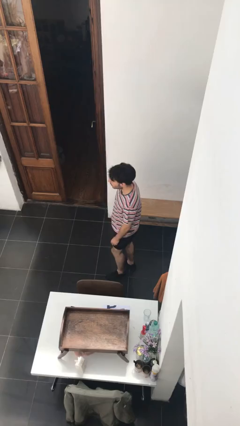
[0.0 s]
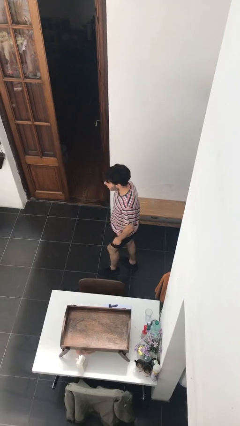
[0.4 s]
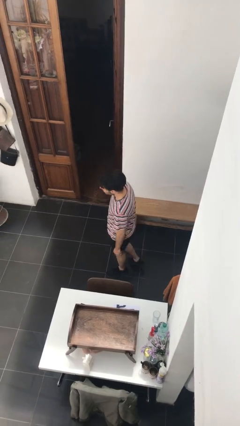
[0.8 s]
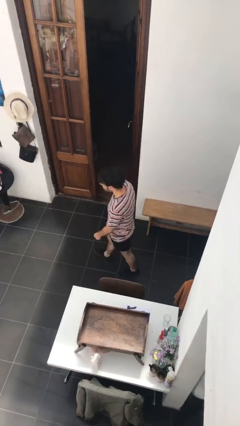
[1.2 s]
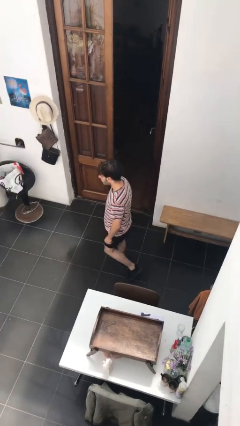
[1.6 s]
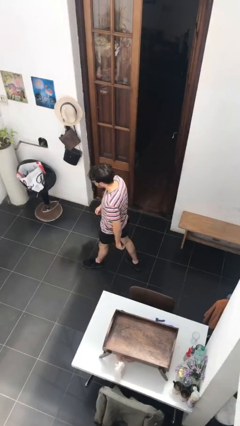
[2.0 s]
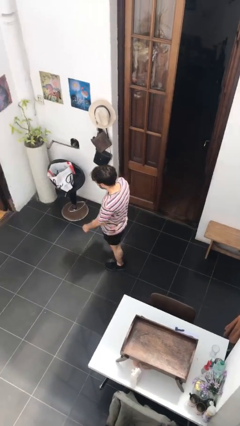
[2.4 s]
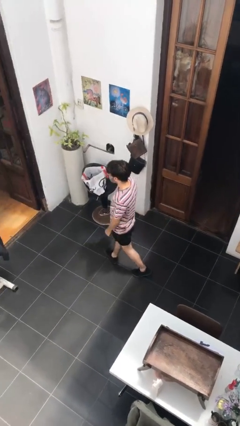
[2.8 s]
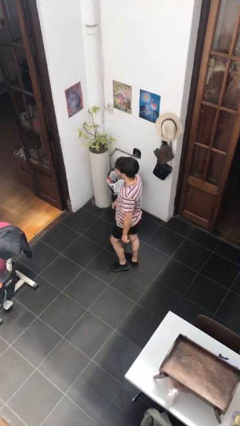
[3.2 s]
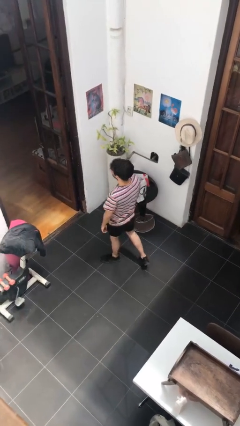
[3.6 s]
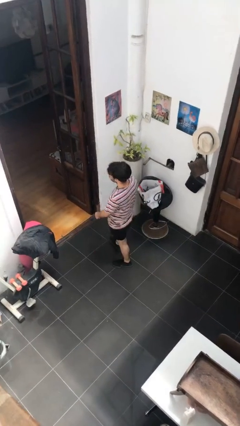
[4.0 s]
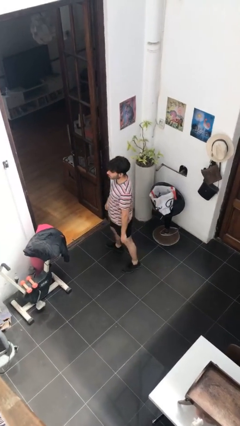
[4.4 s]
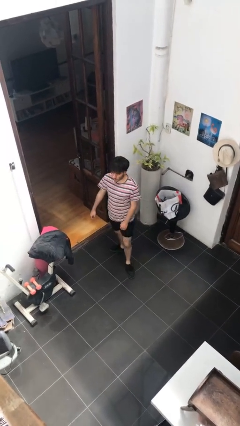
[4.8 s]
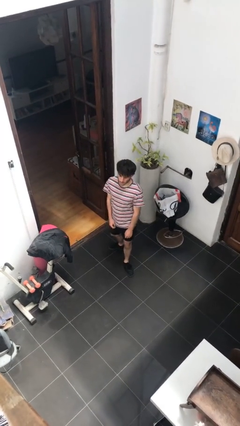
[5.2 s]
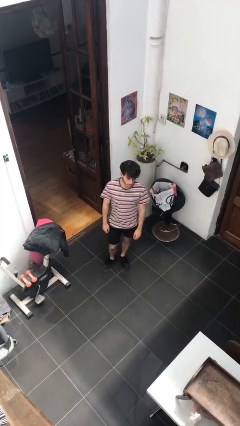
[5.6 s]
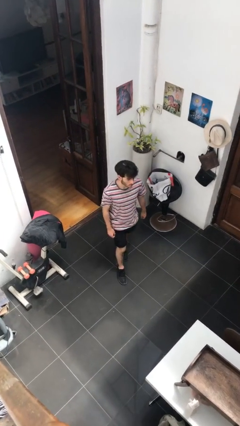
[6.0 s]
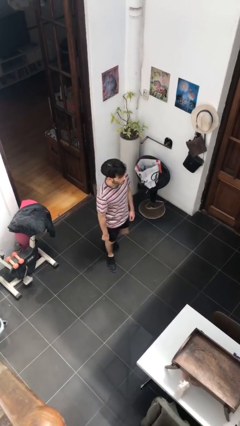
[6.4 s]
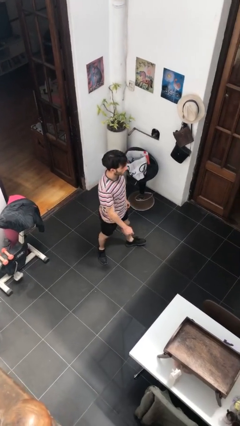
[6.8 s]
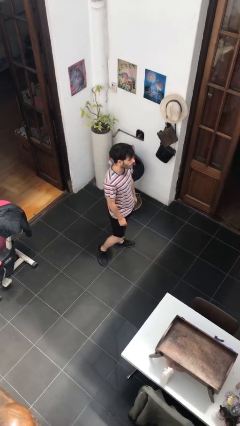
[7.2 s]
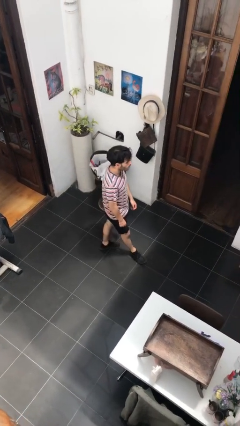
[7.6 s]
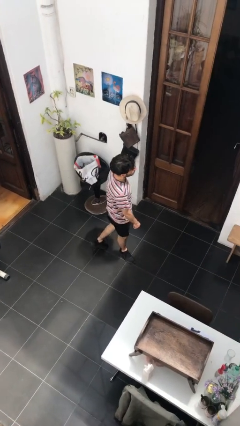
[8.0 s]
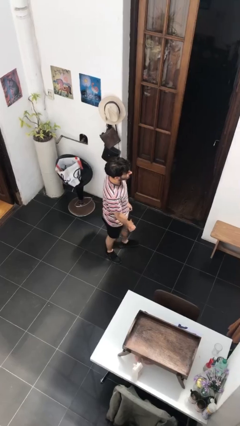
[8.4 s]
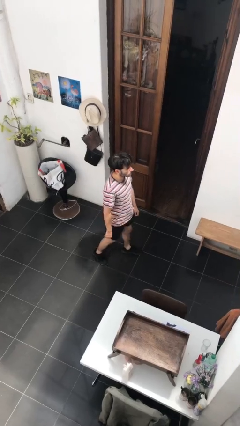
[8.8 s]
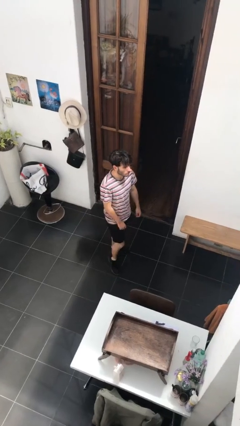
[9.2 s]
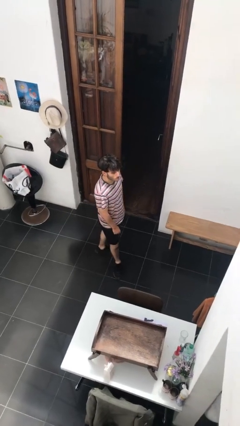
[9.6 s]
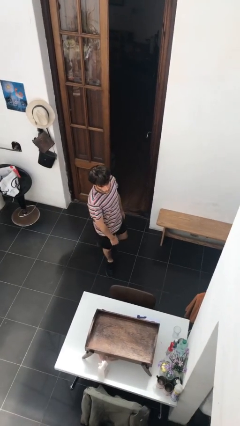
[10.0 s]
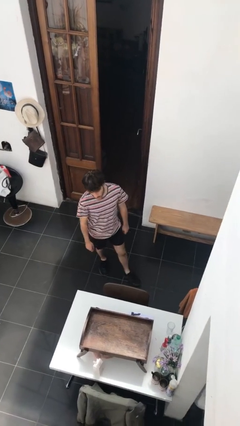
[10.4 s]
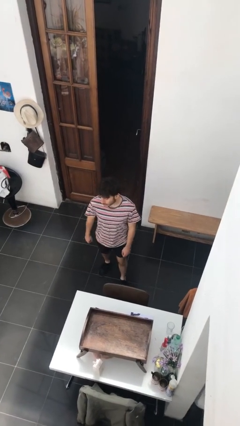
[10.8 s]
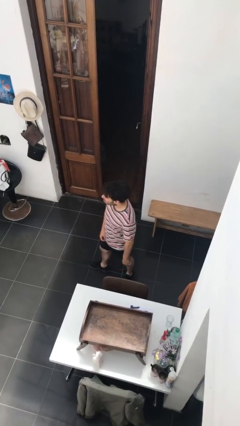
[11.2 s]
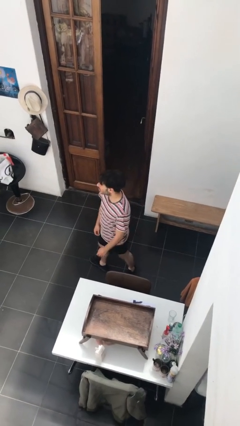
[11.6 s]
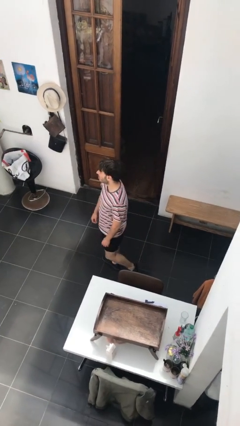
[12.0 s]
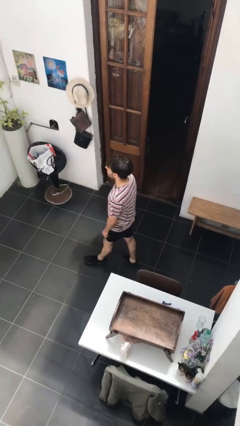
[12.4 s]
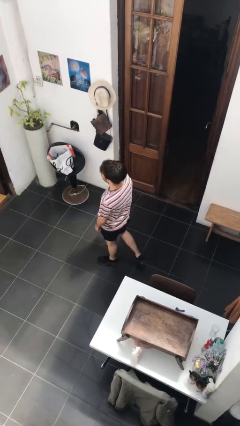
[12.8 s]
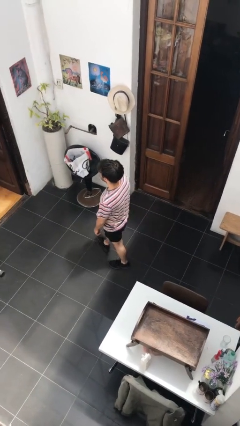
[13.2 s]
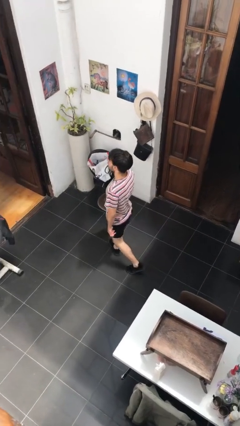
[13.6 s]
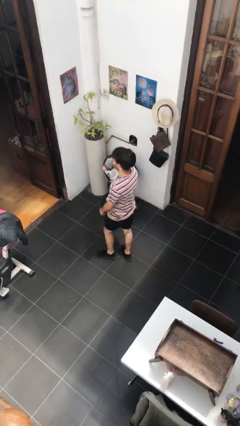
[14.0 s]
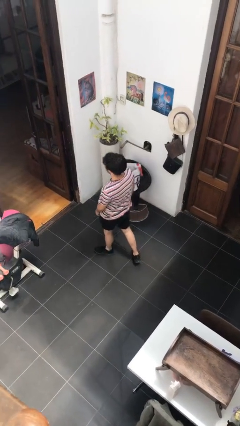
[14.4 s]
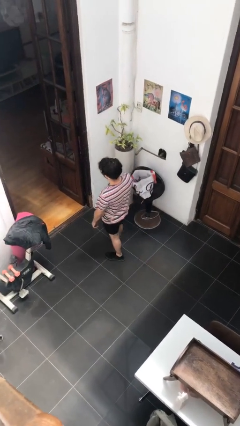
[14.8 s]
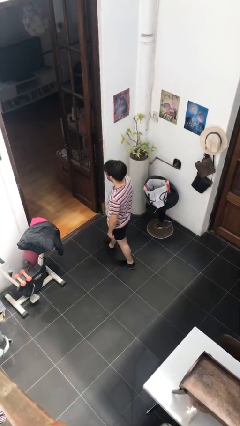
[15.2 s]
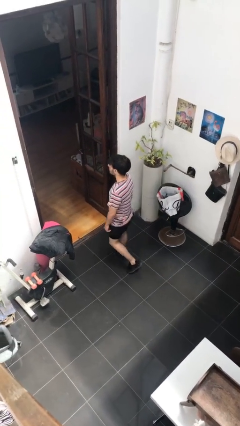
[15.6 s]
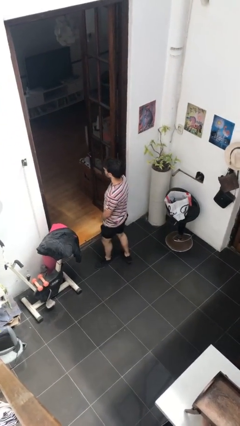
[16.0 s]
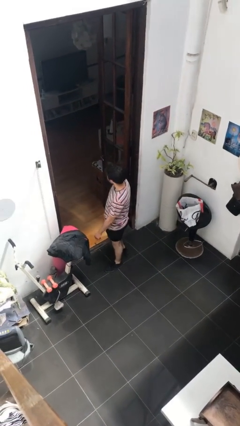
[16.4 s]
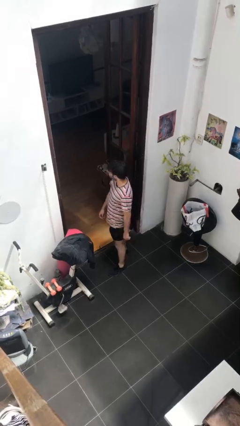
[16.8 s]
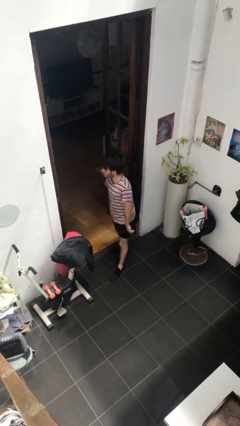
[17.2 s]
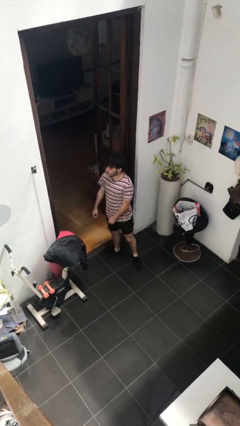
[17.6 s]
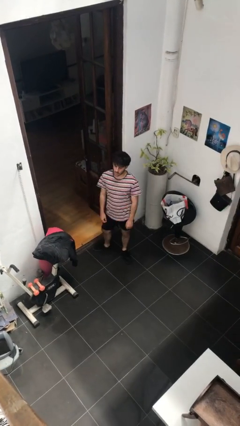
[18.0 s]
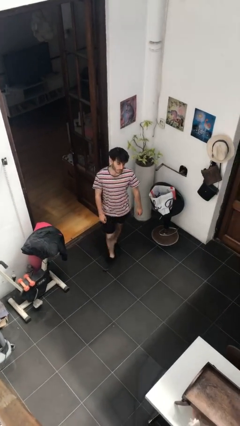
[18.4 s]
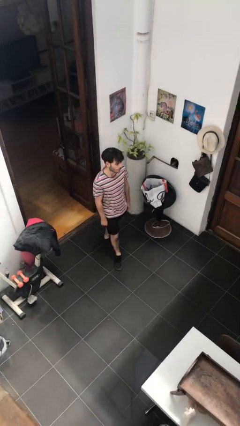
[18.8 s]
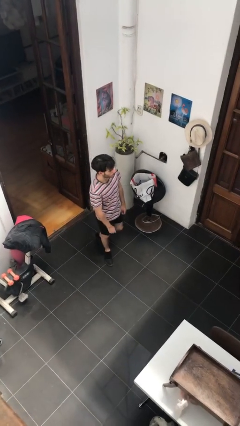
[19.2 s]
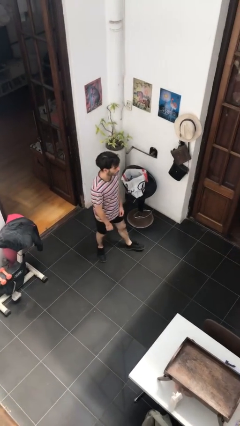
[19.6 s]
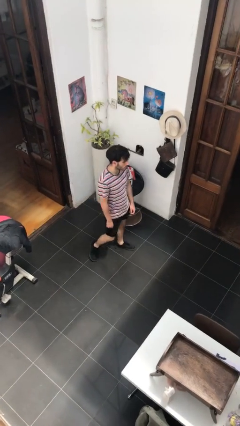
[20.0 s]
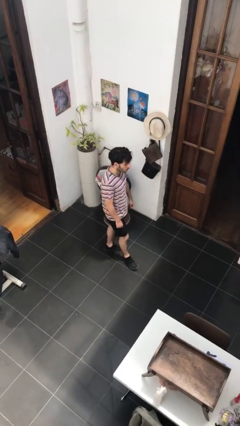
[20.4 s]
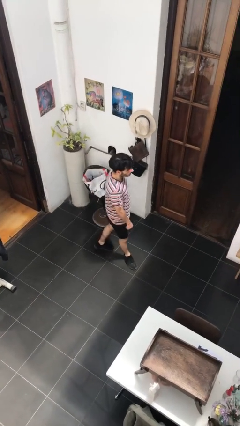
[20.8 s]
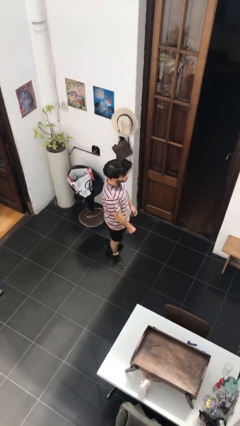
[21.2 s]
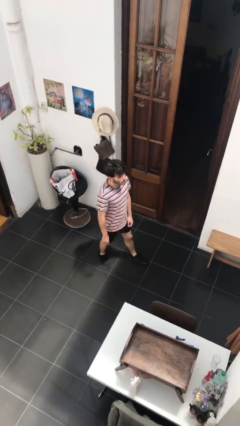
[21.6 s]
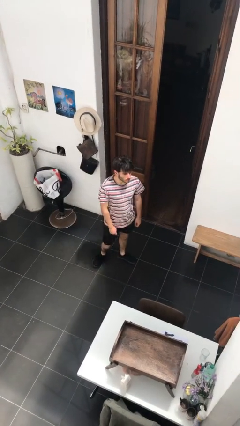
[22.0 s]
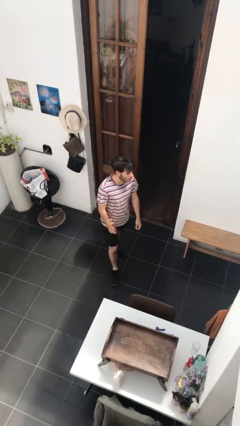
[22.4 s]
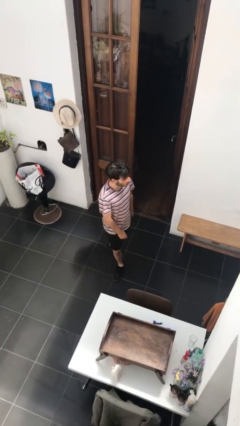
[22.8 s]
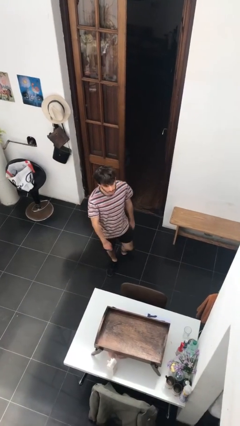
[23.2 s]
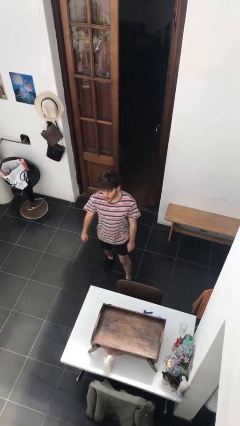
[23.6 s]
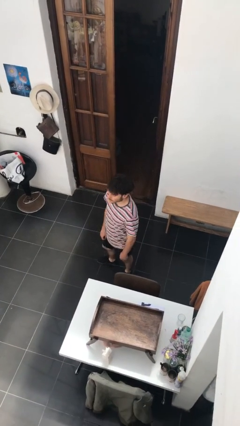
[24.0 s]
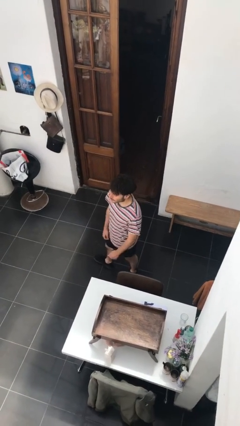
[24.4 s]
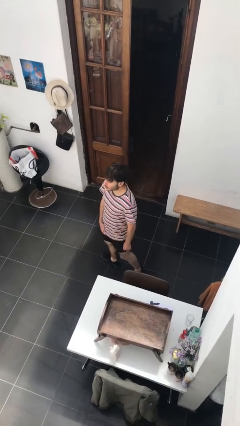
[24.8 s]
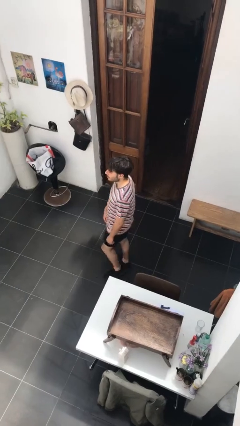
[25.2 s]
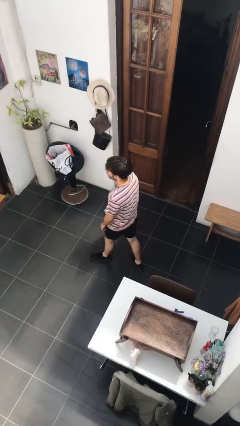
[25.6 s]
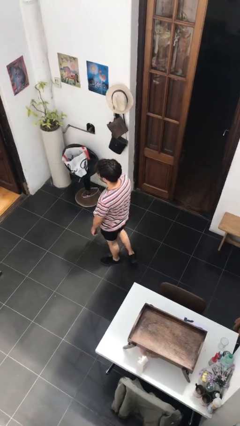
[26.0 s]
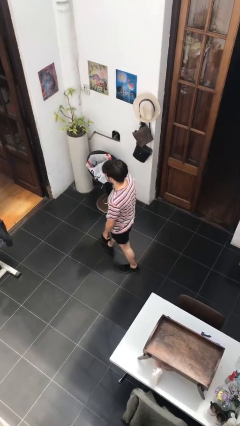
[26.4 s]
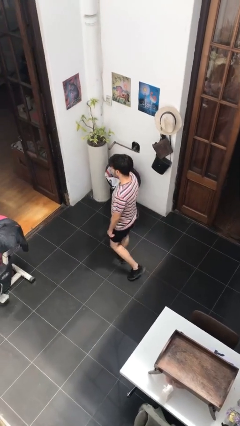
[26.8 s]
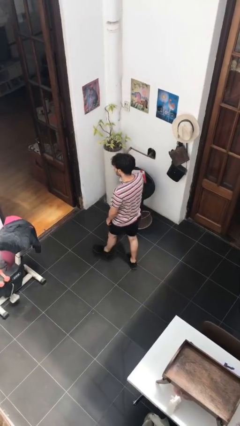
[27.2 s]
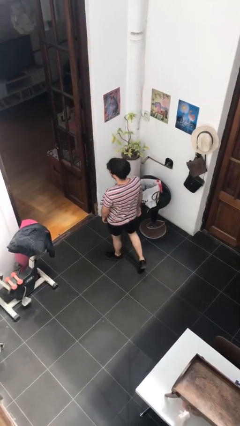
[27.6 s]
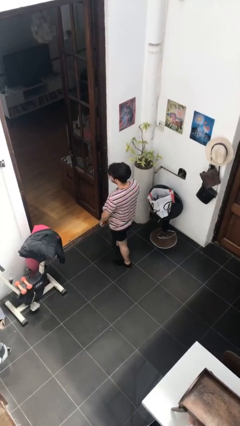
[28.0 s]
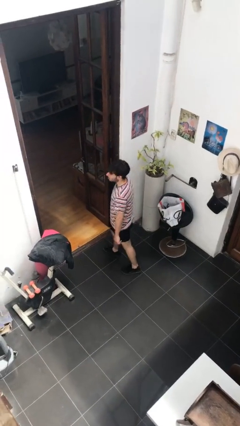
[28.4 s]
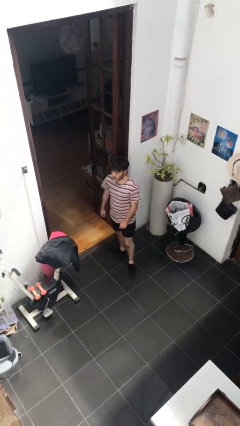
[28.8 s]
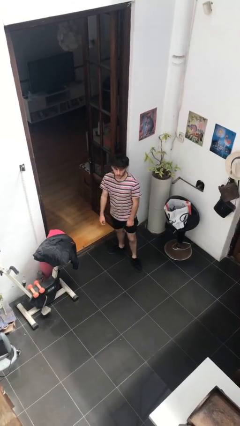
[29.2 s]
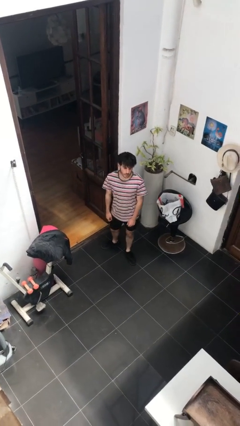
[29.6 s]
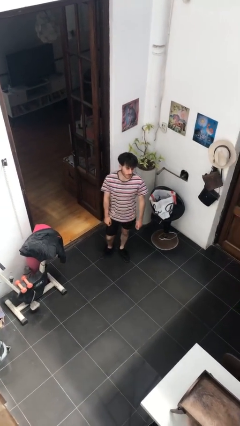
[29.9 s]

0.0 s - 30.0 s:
person walks

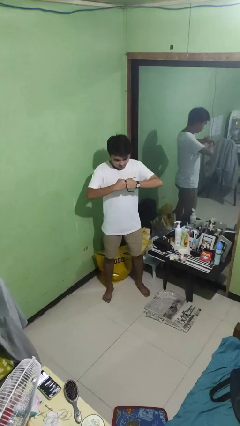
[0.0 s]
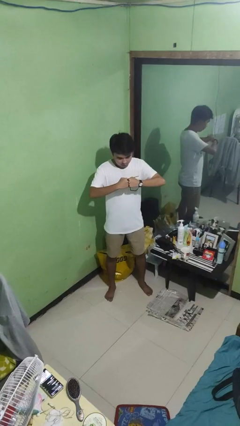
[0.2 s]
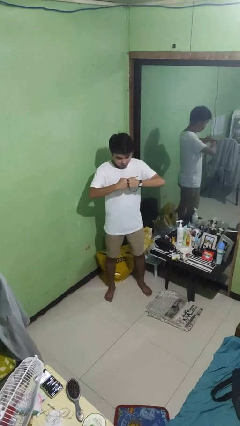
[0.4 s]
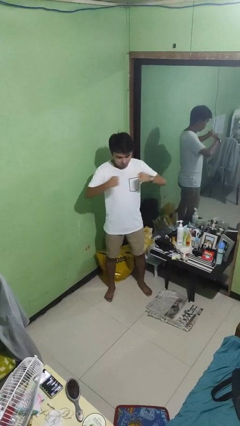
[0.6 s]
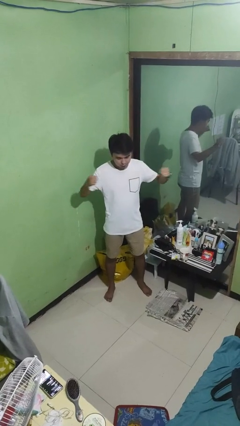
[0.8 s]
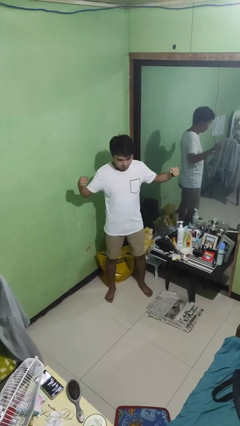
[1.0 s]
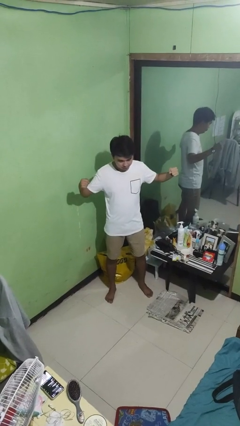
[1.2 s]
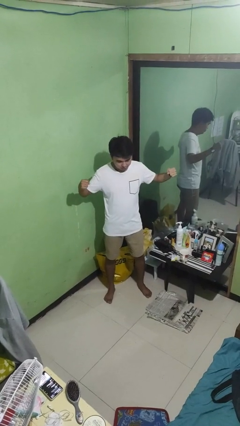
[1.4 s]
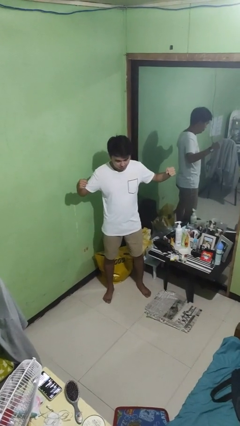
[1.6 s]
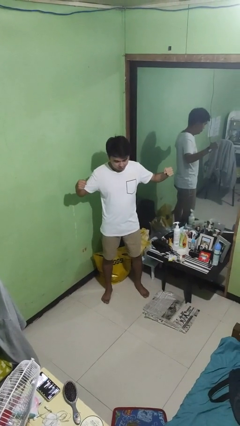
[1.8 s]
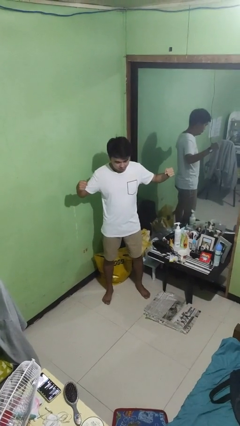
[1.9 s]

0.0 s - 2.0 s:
person gestures zoom in

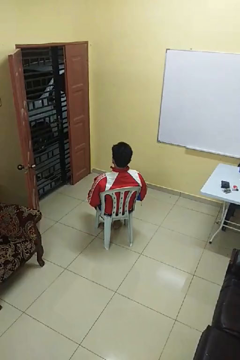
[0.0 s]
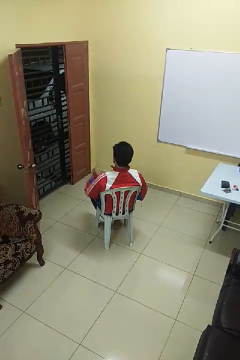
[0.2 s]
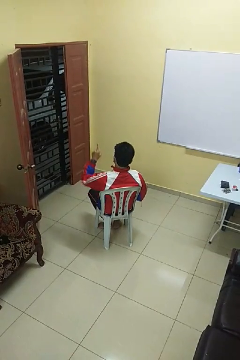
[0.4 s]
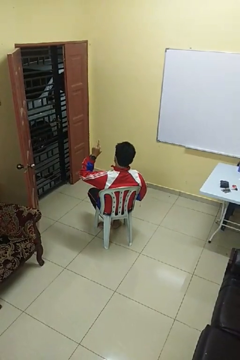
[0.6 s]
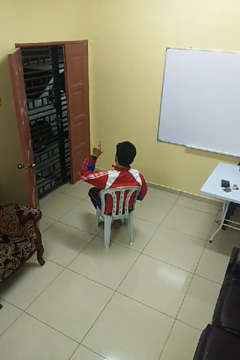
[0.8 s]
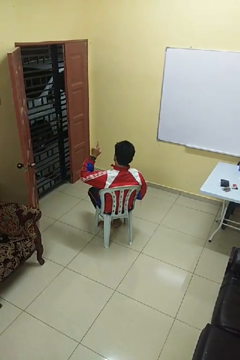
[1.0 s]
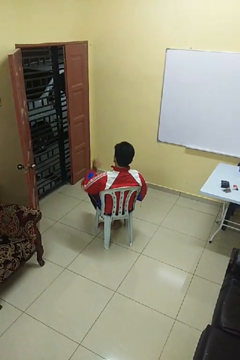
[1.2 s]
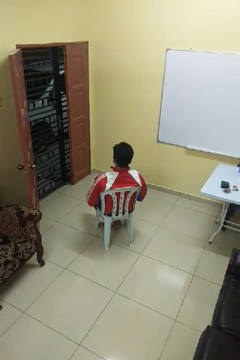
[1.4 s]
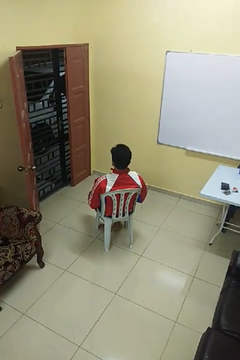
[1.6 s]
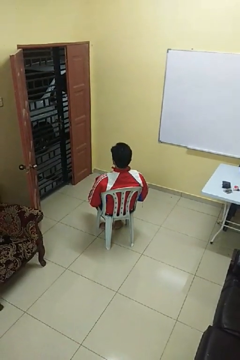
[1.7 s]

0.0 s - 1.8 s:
person gestures number one
